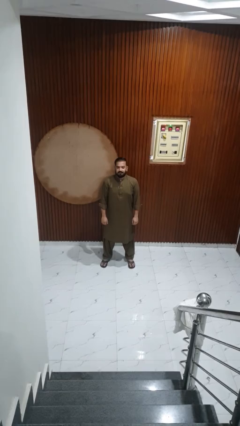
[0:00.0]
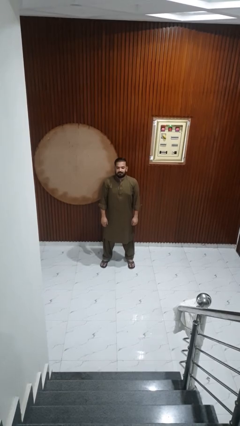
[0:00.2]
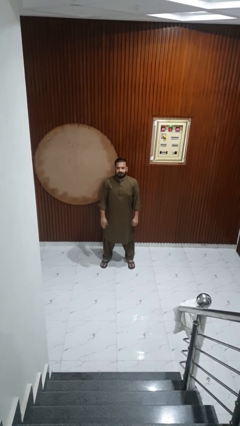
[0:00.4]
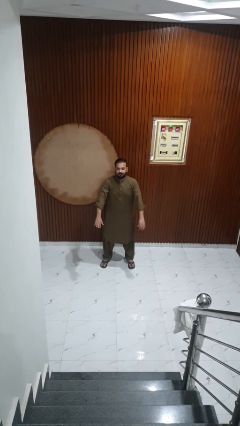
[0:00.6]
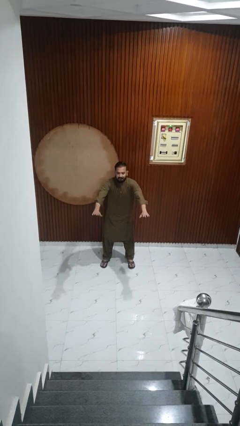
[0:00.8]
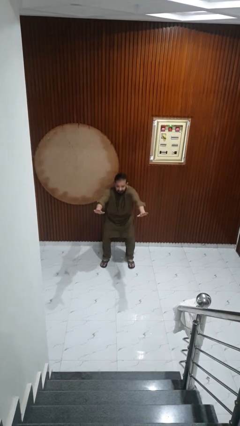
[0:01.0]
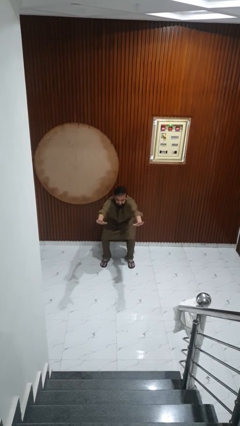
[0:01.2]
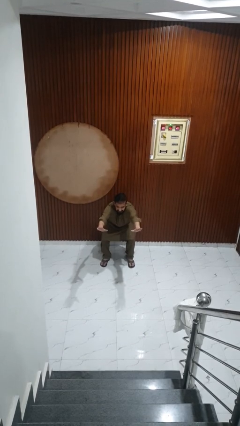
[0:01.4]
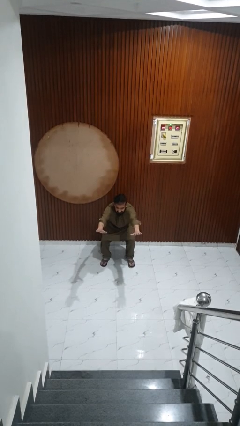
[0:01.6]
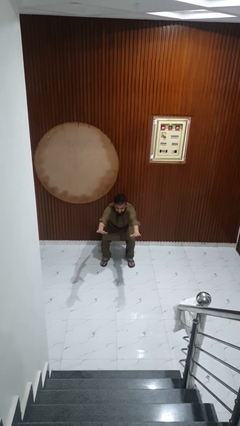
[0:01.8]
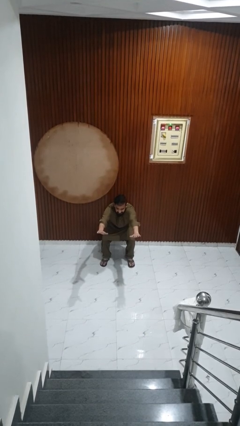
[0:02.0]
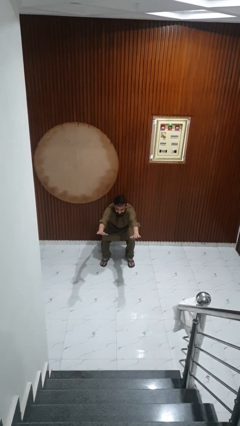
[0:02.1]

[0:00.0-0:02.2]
person squats

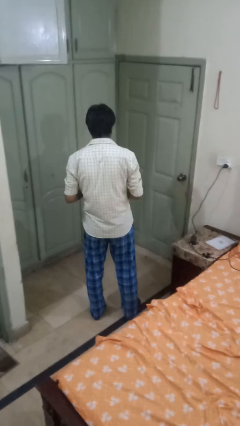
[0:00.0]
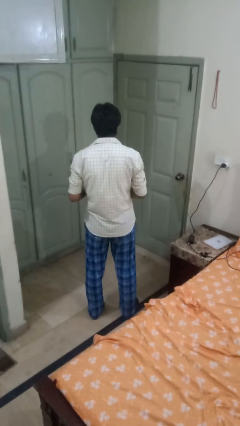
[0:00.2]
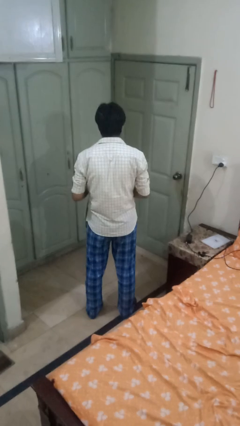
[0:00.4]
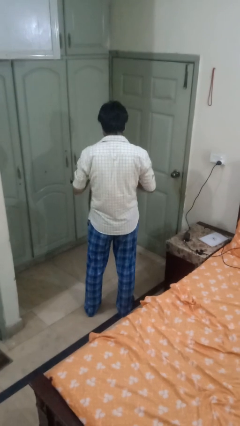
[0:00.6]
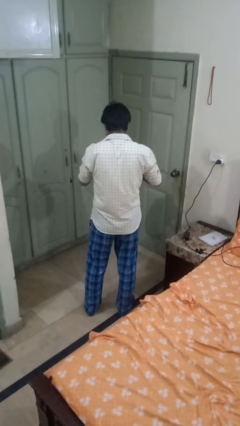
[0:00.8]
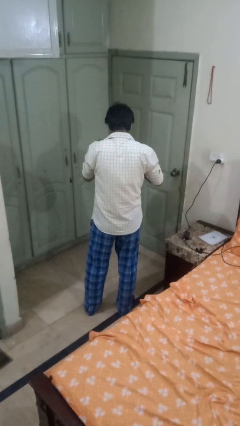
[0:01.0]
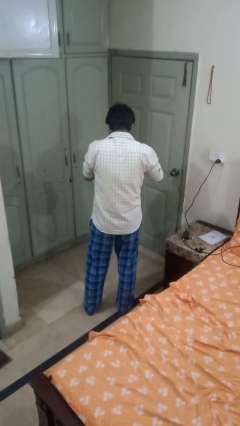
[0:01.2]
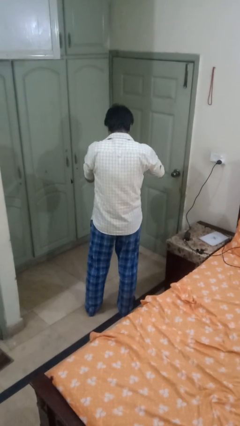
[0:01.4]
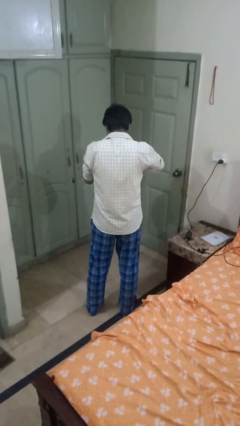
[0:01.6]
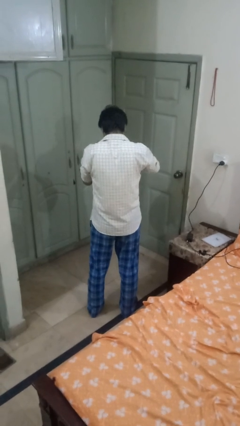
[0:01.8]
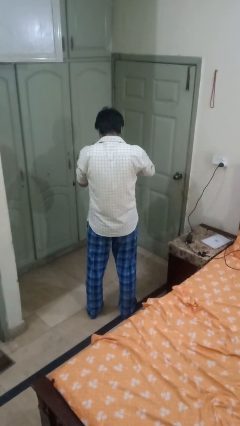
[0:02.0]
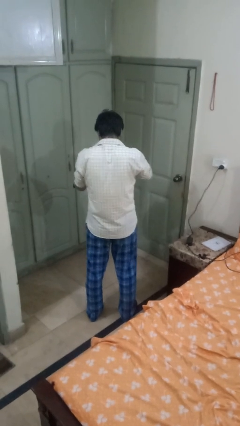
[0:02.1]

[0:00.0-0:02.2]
person searches in purse

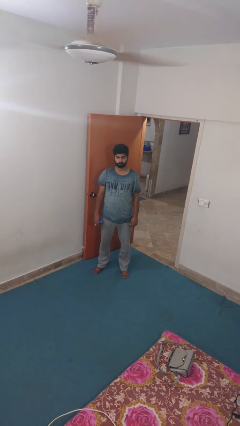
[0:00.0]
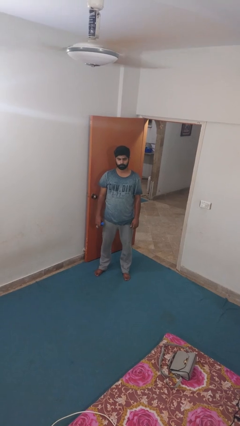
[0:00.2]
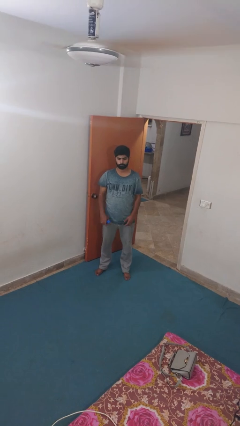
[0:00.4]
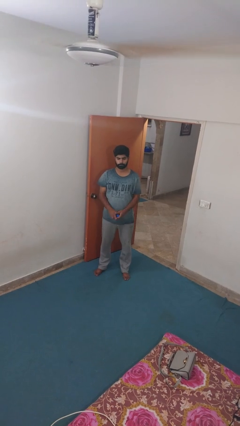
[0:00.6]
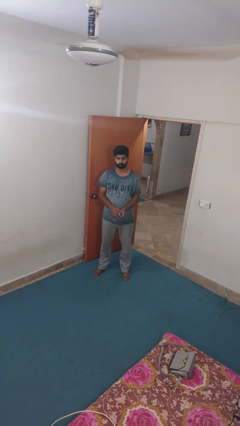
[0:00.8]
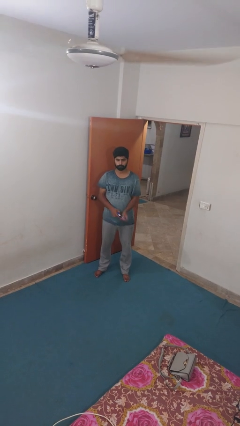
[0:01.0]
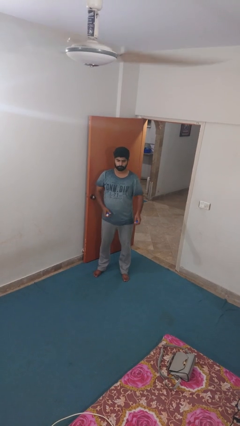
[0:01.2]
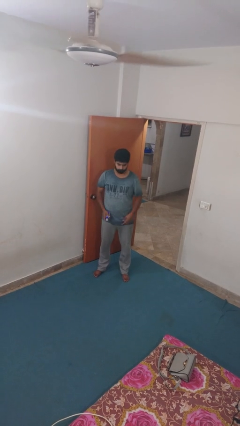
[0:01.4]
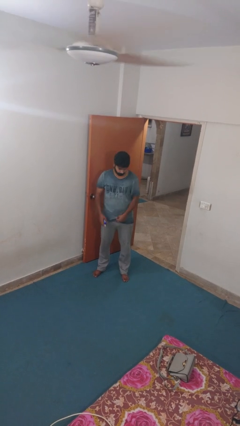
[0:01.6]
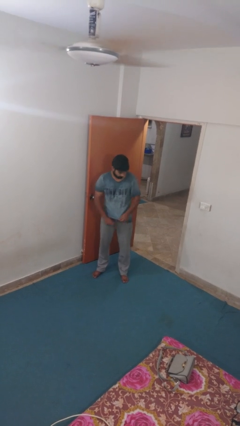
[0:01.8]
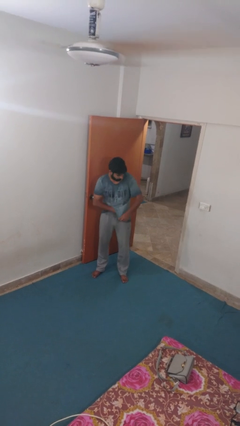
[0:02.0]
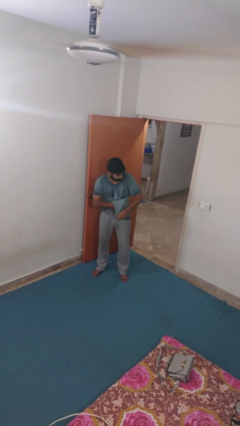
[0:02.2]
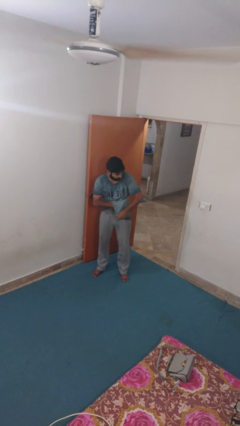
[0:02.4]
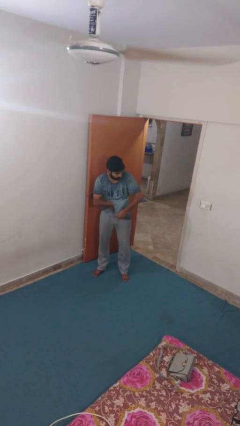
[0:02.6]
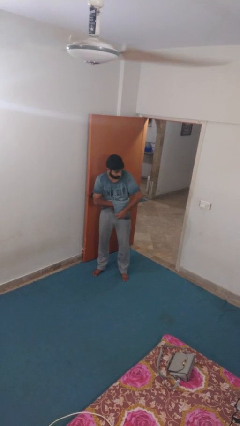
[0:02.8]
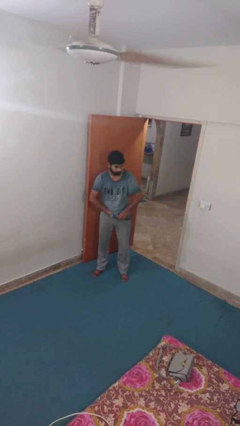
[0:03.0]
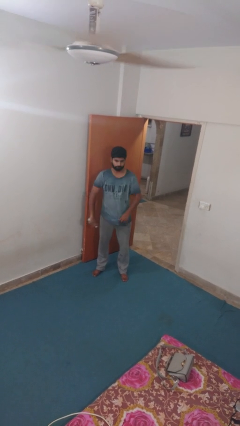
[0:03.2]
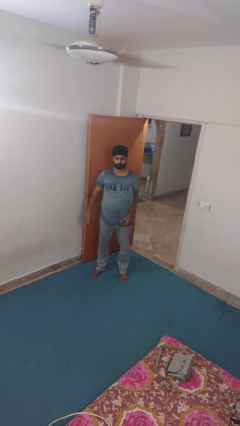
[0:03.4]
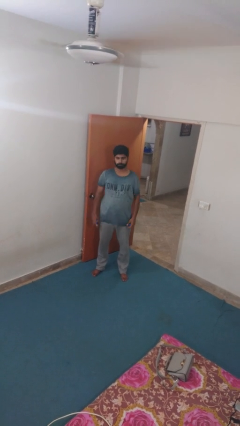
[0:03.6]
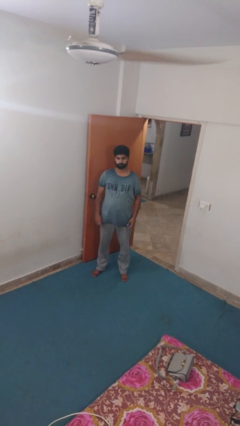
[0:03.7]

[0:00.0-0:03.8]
person applies deodorant

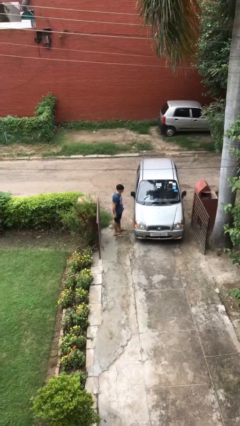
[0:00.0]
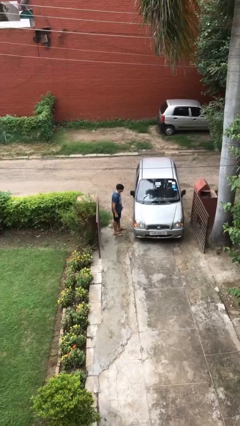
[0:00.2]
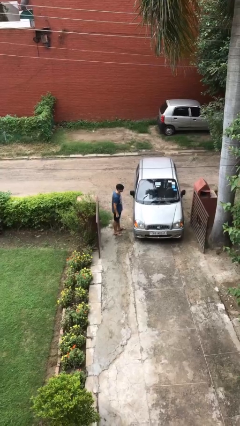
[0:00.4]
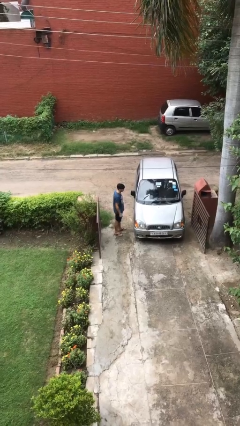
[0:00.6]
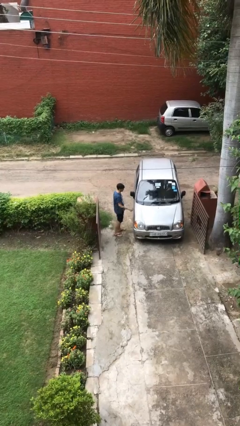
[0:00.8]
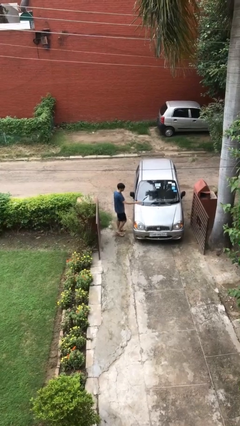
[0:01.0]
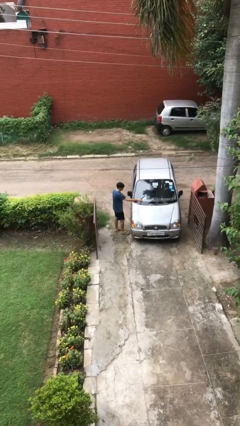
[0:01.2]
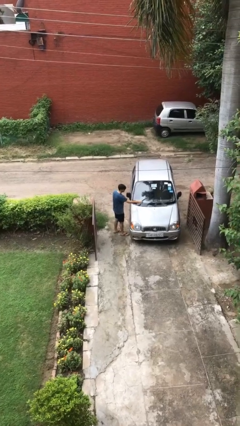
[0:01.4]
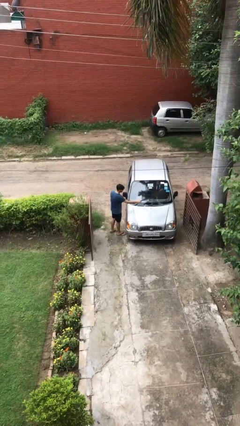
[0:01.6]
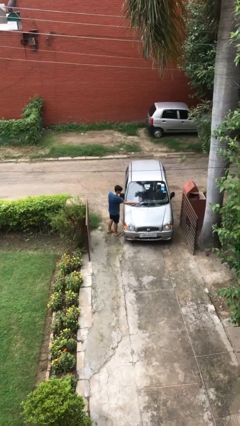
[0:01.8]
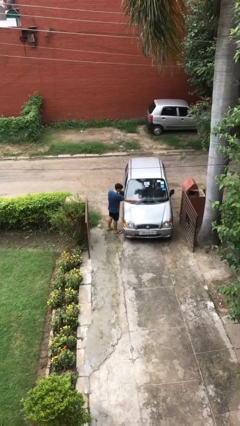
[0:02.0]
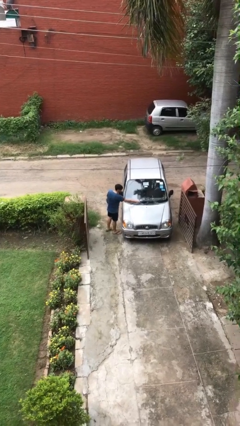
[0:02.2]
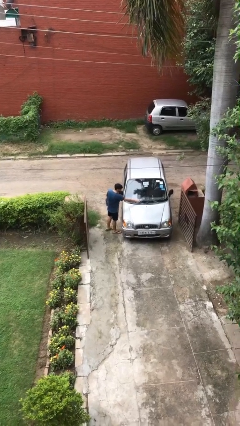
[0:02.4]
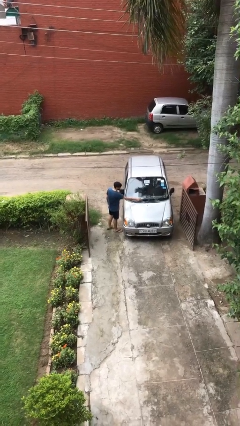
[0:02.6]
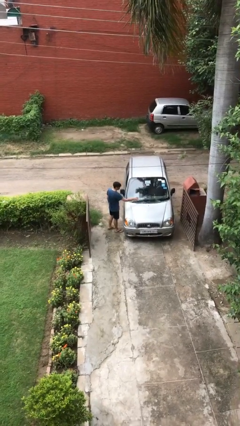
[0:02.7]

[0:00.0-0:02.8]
person flips down car wipers

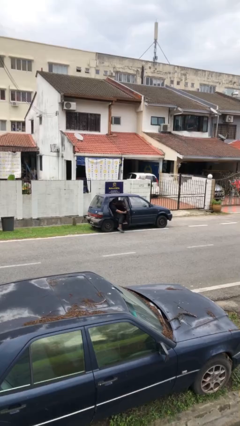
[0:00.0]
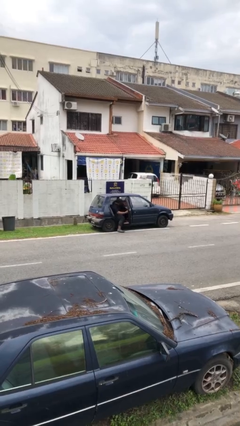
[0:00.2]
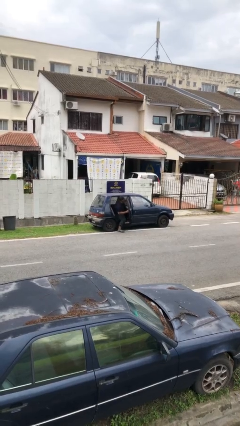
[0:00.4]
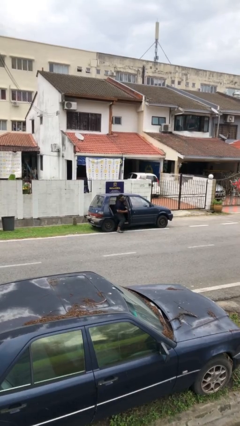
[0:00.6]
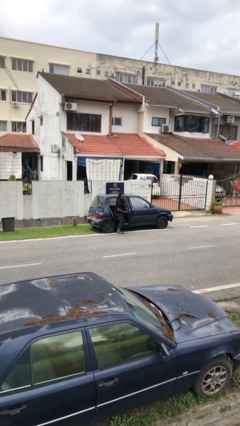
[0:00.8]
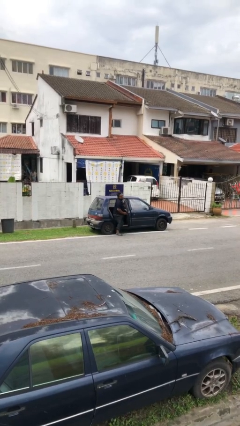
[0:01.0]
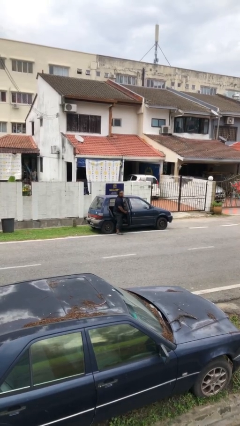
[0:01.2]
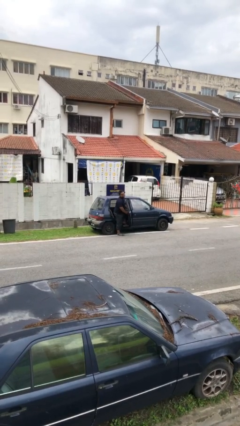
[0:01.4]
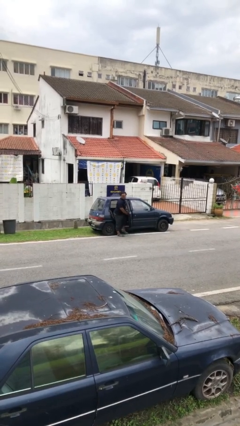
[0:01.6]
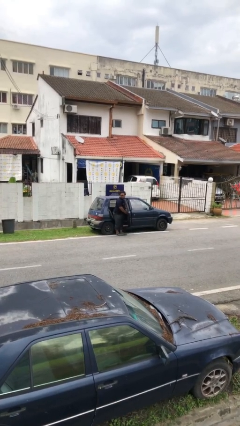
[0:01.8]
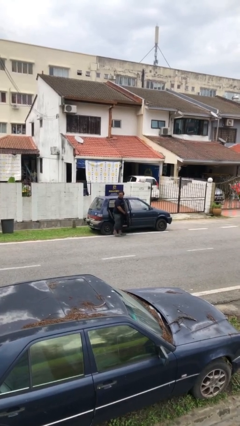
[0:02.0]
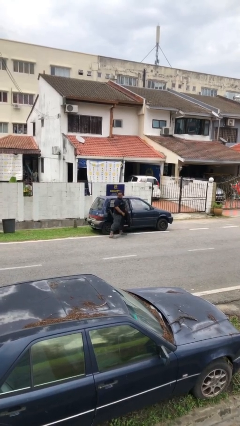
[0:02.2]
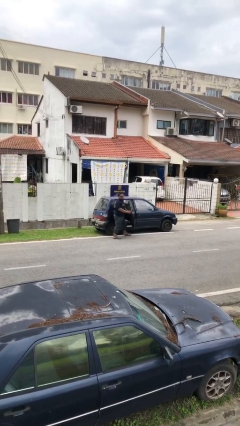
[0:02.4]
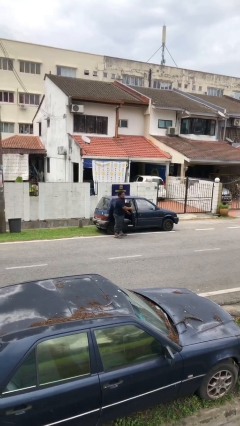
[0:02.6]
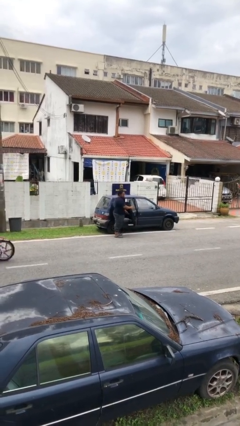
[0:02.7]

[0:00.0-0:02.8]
person exits car

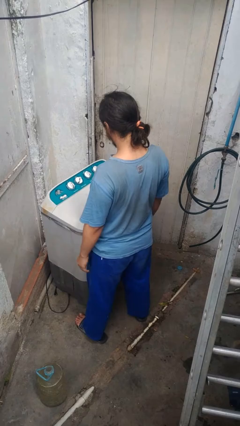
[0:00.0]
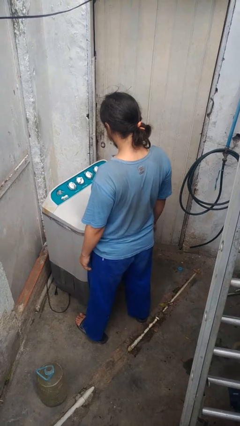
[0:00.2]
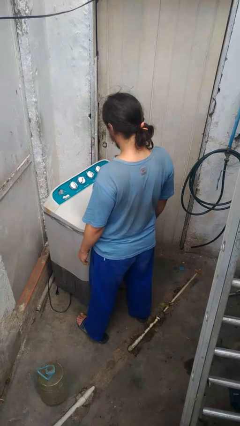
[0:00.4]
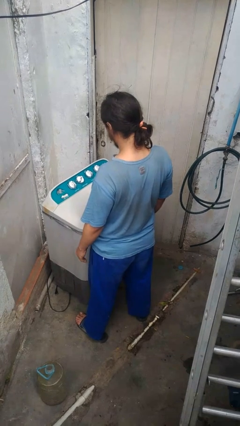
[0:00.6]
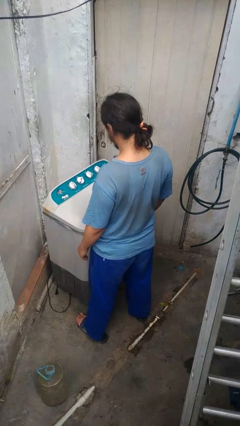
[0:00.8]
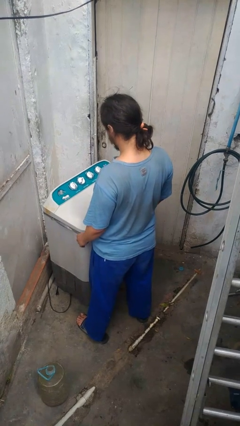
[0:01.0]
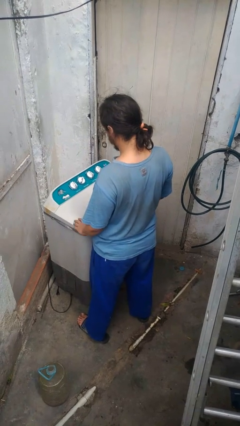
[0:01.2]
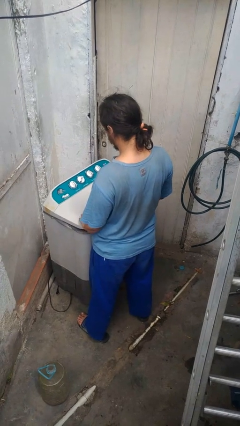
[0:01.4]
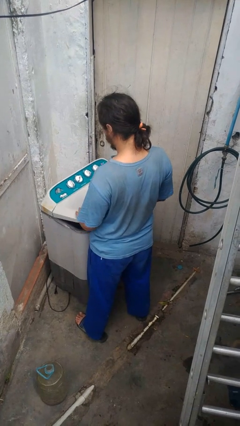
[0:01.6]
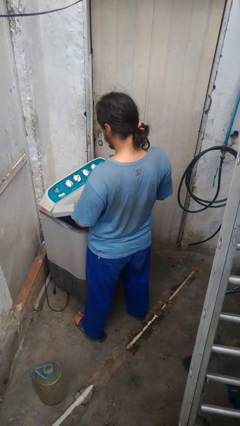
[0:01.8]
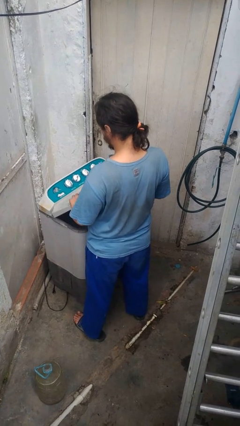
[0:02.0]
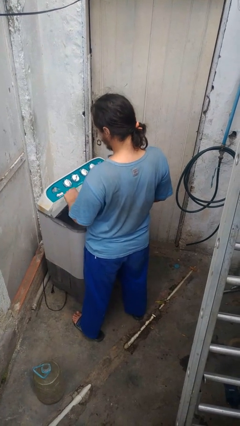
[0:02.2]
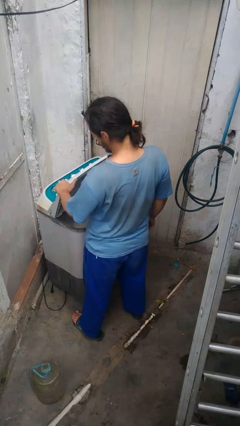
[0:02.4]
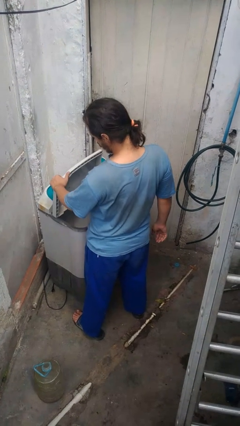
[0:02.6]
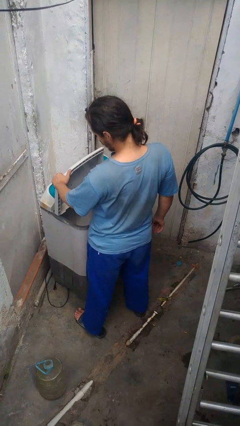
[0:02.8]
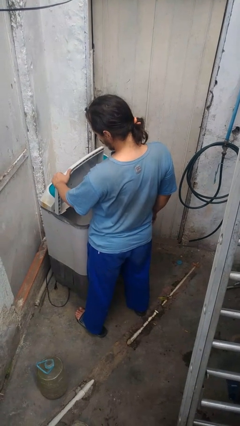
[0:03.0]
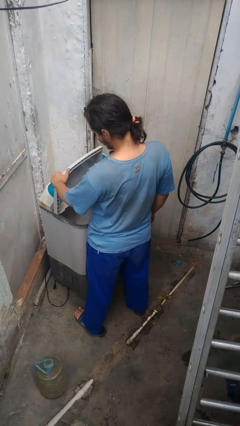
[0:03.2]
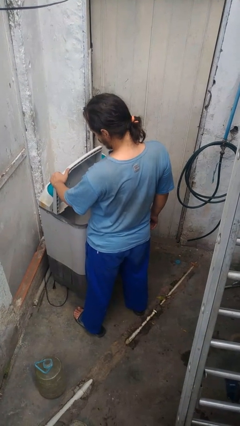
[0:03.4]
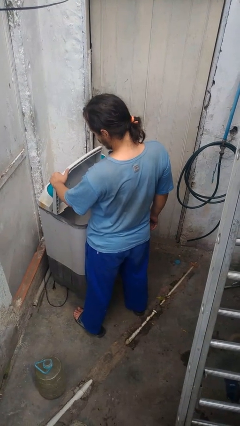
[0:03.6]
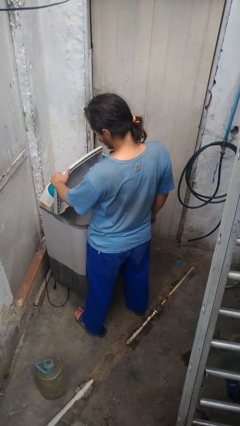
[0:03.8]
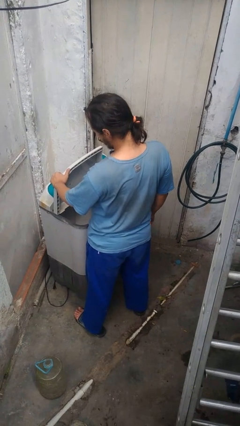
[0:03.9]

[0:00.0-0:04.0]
person opens clothes washer
